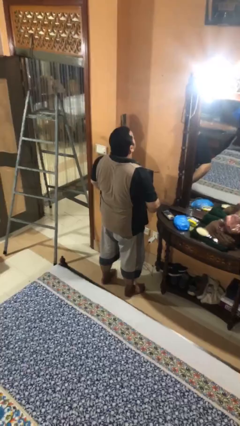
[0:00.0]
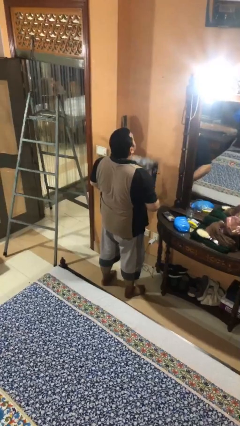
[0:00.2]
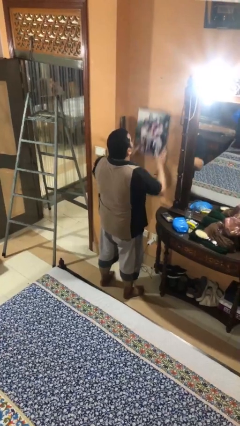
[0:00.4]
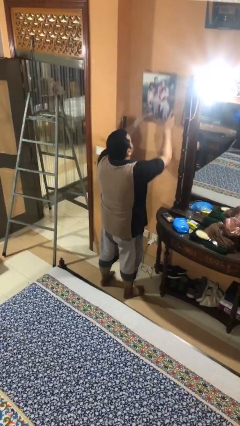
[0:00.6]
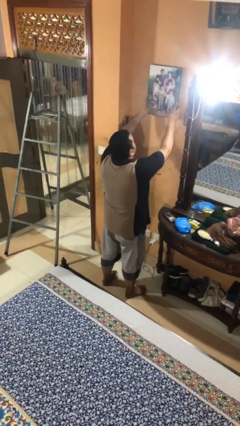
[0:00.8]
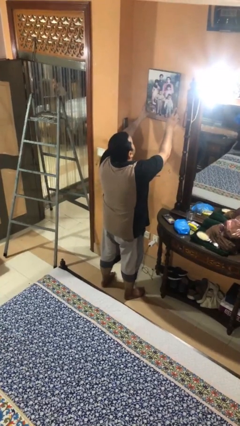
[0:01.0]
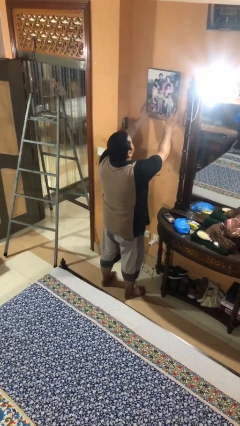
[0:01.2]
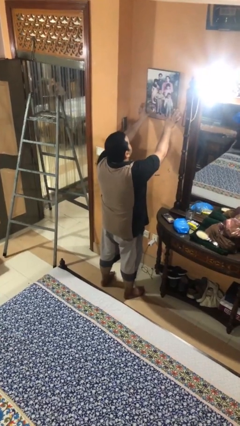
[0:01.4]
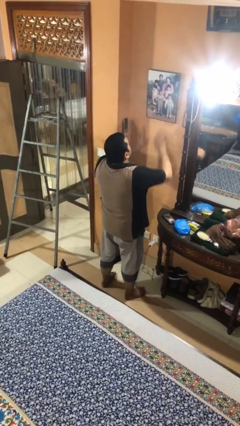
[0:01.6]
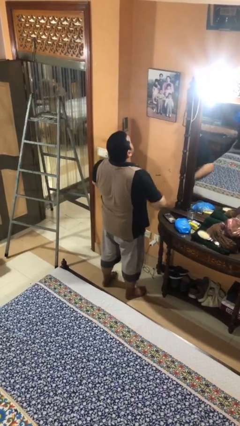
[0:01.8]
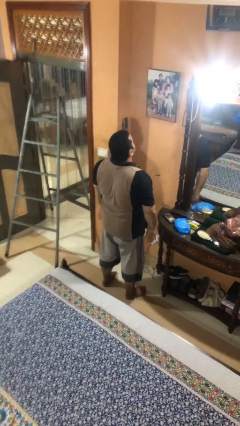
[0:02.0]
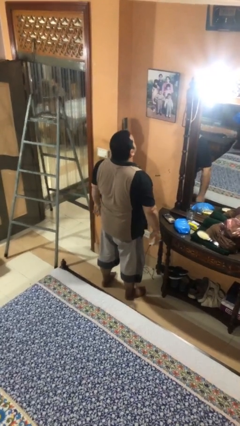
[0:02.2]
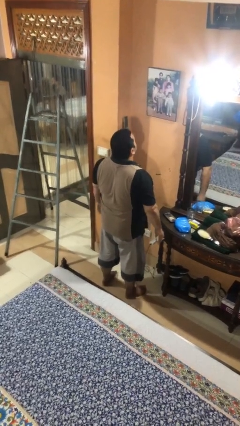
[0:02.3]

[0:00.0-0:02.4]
person puts up picture frame

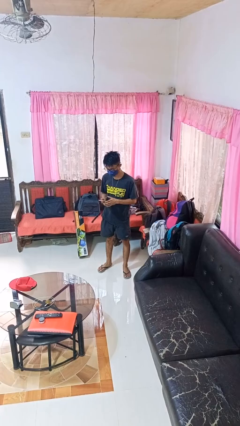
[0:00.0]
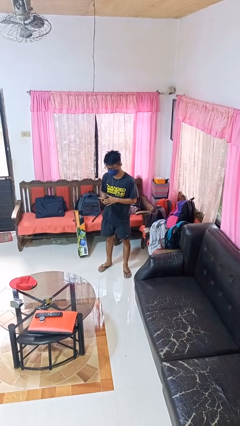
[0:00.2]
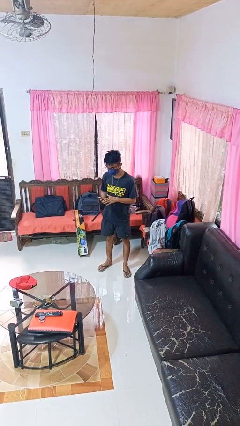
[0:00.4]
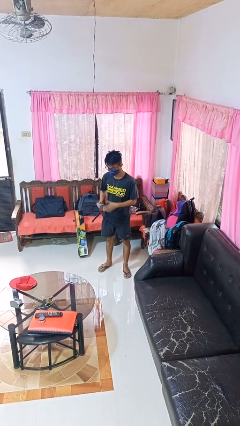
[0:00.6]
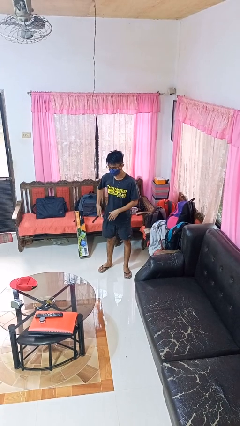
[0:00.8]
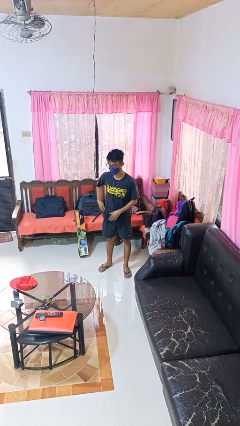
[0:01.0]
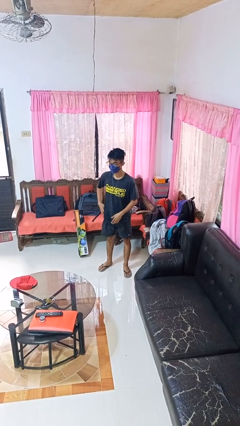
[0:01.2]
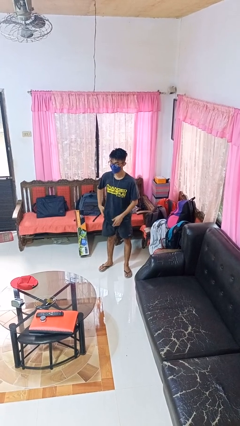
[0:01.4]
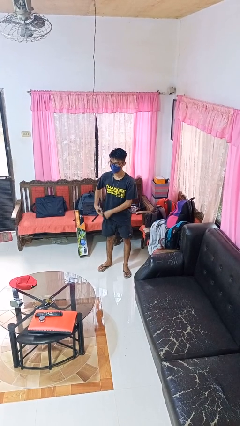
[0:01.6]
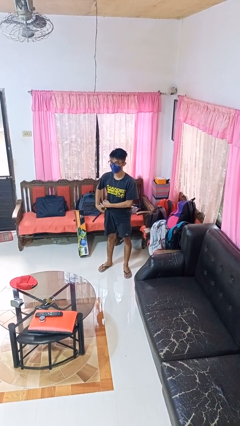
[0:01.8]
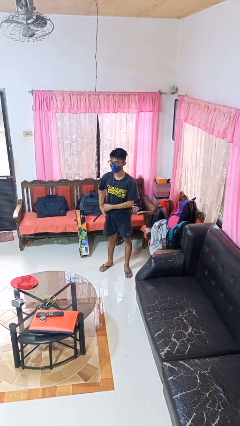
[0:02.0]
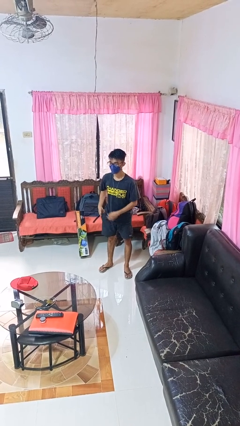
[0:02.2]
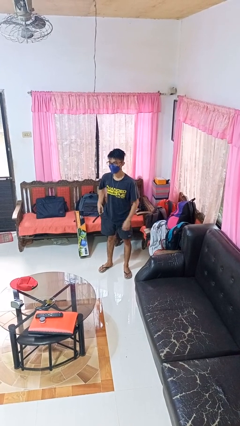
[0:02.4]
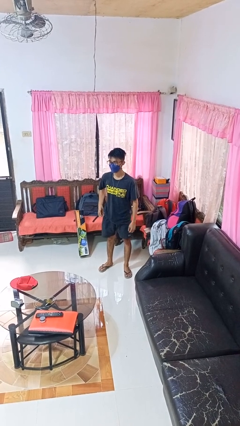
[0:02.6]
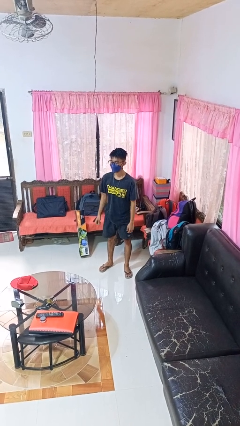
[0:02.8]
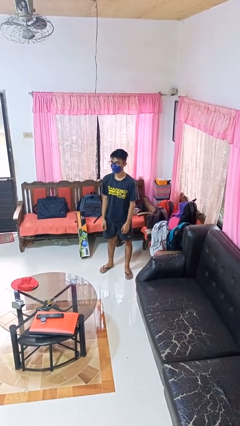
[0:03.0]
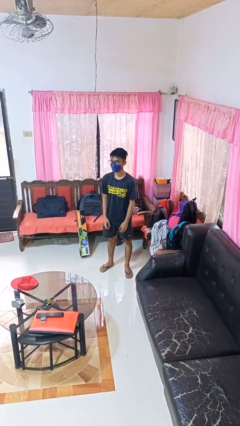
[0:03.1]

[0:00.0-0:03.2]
person puts phone into pocket

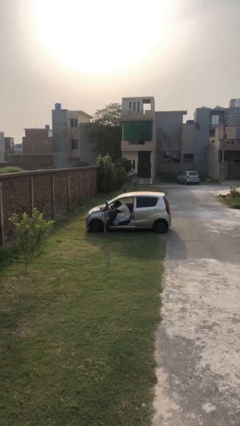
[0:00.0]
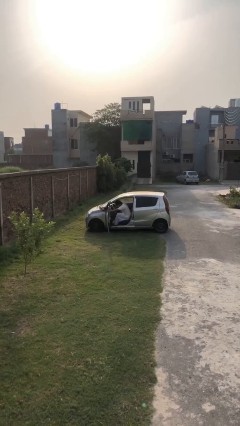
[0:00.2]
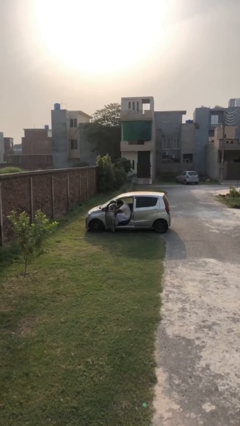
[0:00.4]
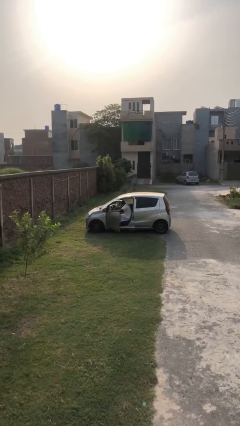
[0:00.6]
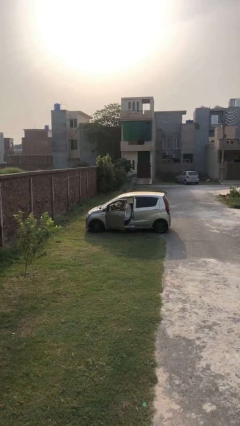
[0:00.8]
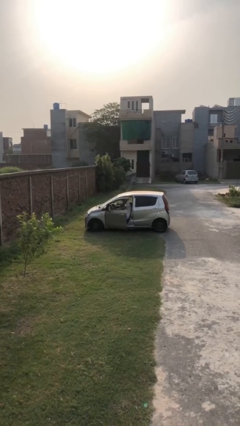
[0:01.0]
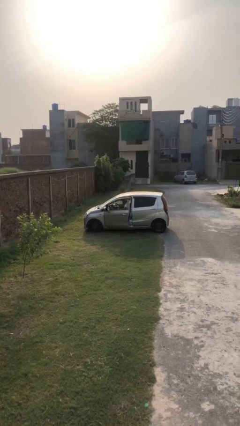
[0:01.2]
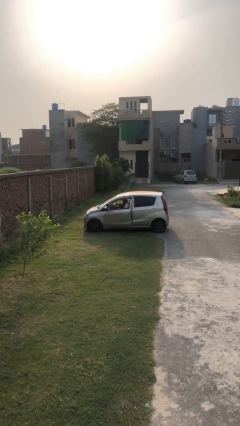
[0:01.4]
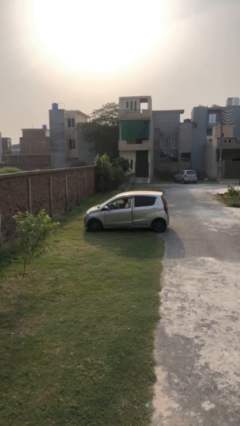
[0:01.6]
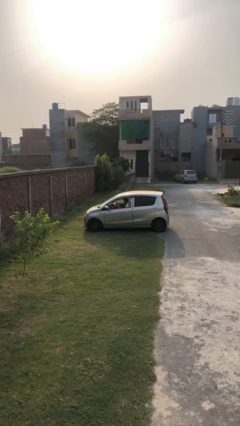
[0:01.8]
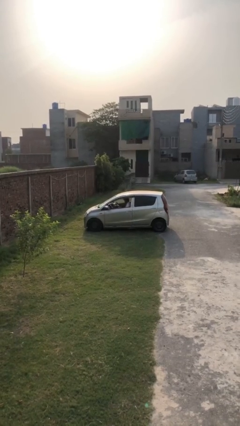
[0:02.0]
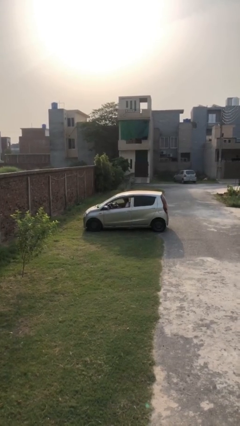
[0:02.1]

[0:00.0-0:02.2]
person closes car door

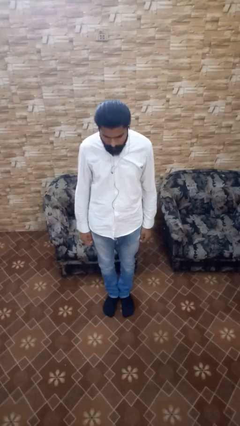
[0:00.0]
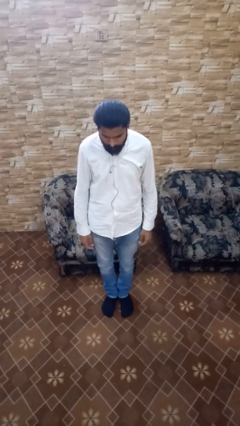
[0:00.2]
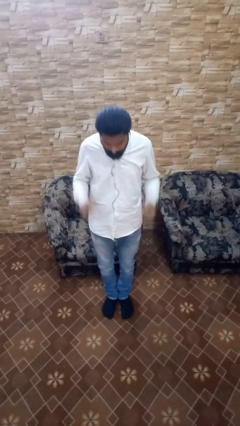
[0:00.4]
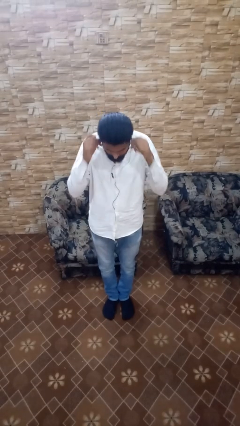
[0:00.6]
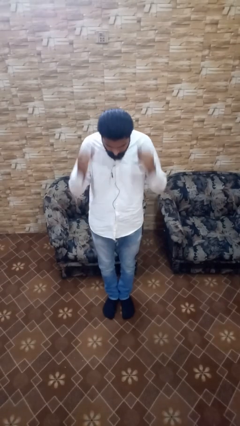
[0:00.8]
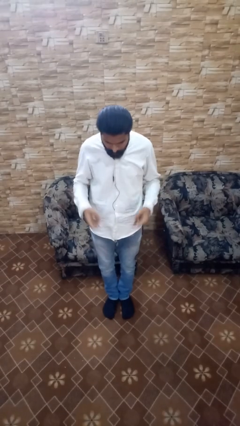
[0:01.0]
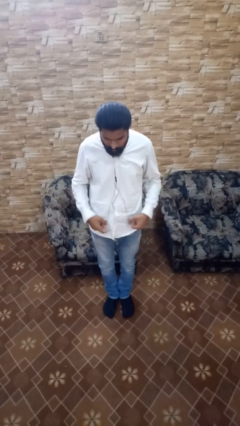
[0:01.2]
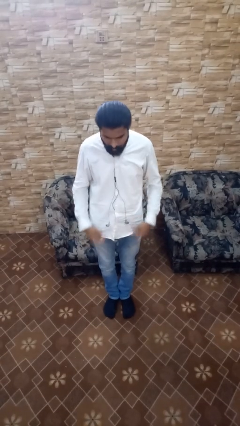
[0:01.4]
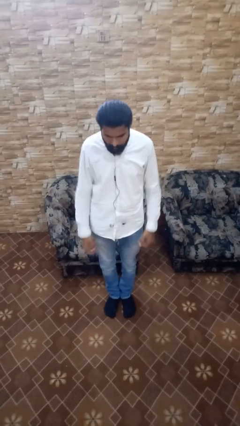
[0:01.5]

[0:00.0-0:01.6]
person takes off headphones

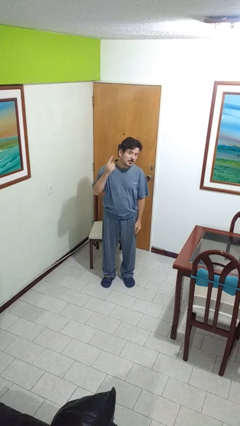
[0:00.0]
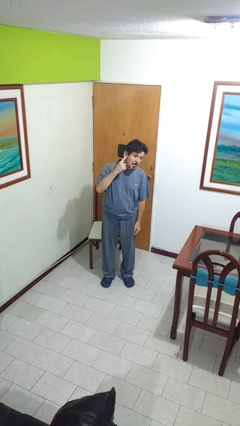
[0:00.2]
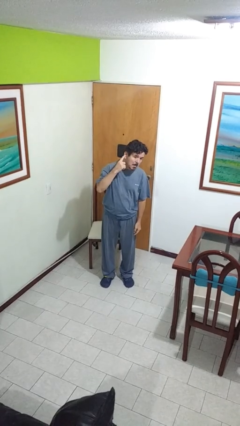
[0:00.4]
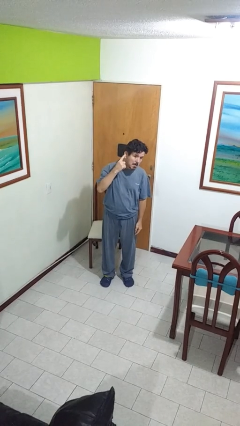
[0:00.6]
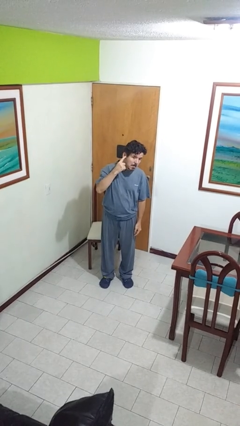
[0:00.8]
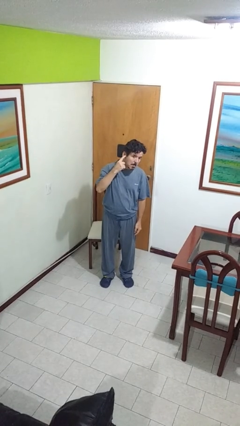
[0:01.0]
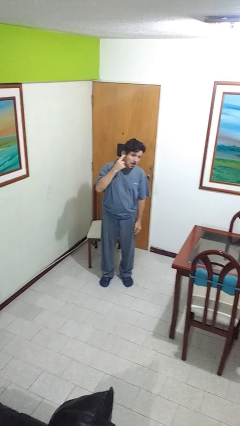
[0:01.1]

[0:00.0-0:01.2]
person gestures listen closely

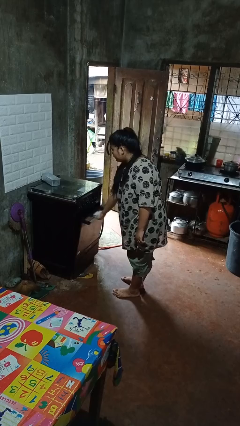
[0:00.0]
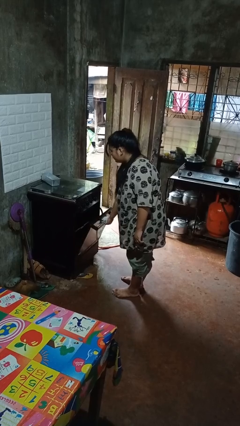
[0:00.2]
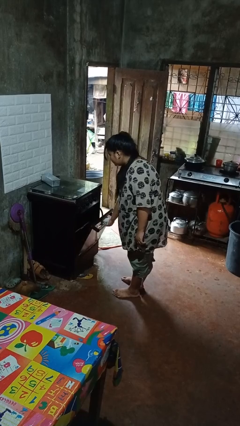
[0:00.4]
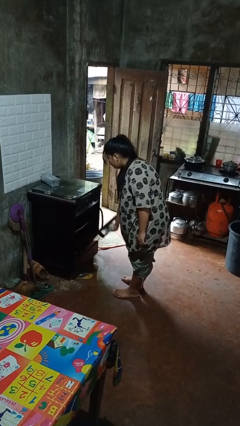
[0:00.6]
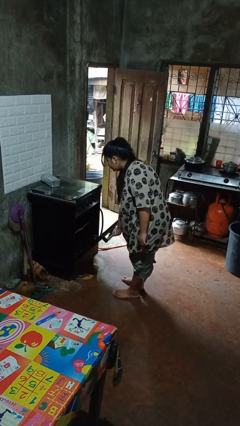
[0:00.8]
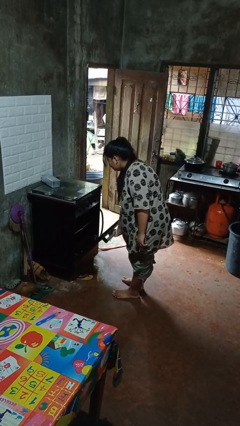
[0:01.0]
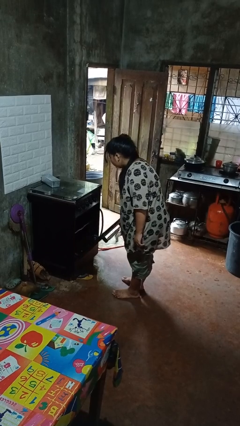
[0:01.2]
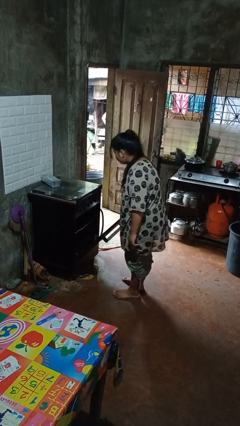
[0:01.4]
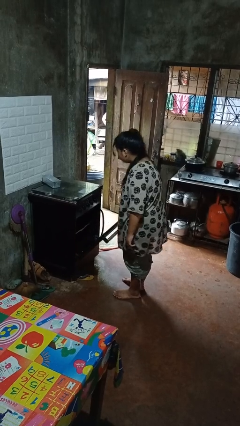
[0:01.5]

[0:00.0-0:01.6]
person opens oven door

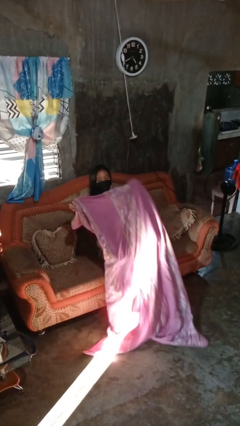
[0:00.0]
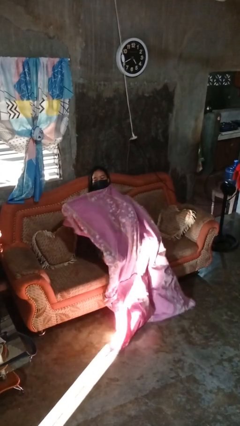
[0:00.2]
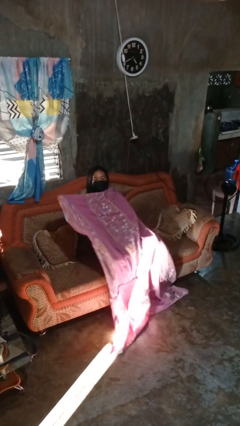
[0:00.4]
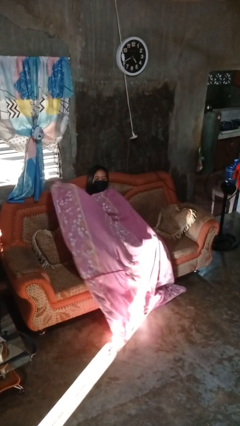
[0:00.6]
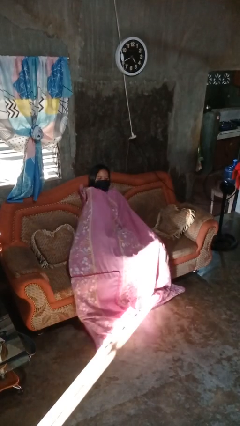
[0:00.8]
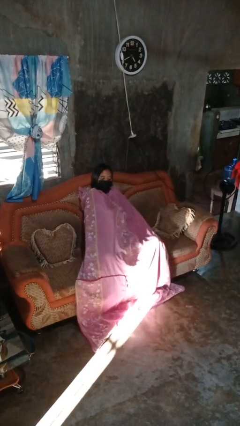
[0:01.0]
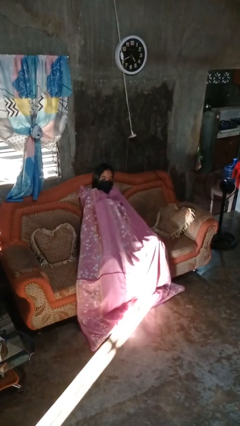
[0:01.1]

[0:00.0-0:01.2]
person covers with blanket

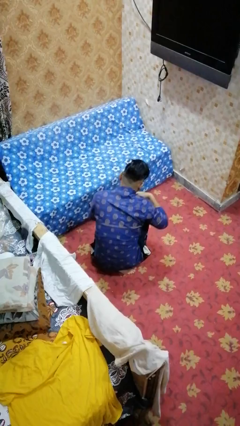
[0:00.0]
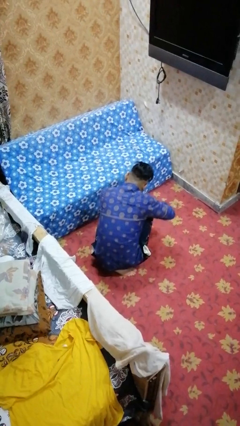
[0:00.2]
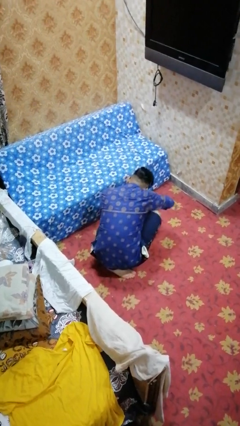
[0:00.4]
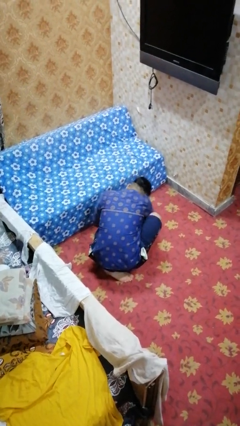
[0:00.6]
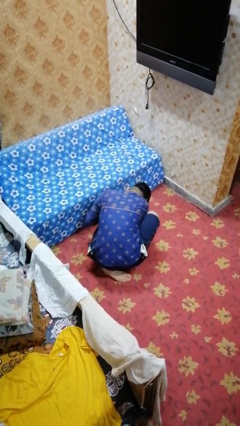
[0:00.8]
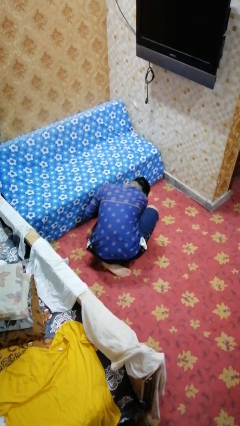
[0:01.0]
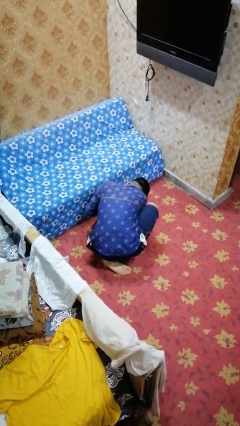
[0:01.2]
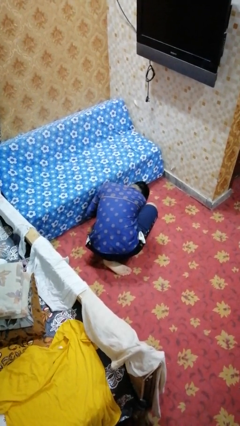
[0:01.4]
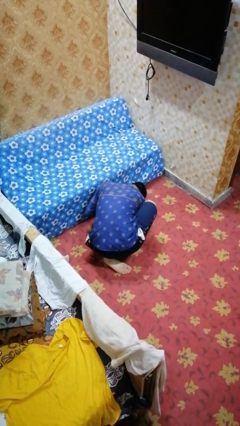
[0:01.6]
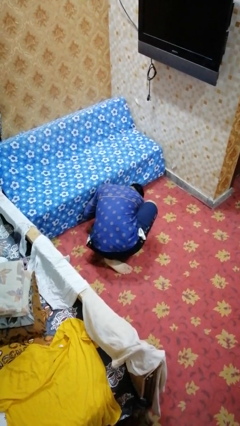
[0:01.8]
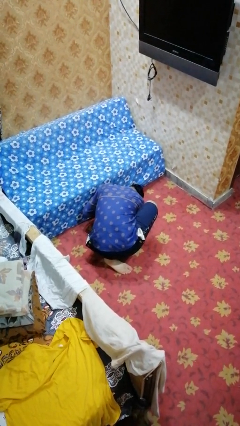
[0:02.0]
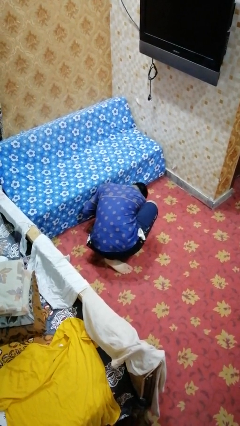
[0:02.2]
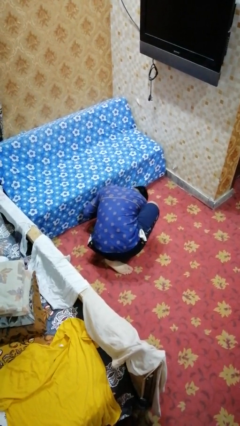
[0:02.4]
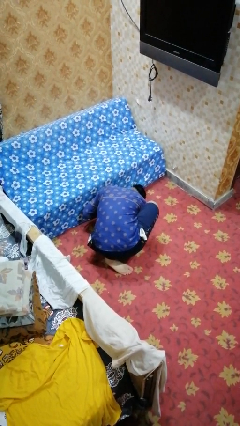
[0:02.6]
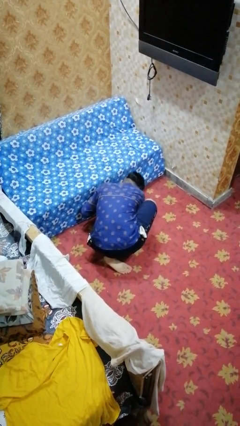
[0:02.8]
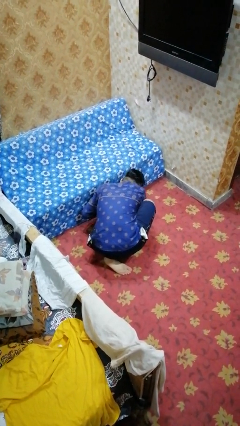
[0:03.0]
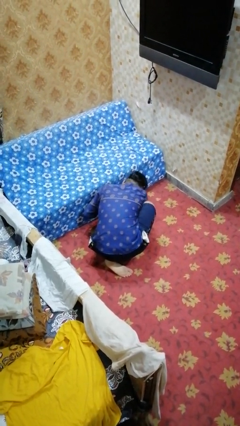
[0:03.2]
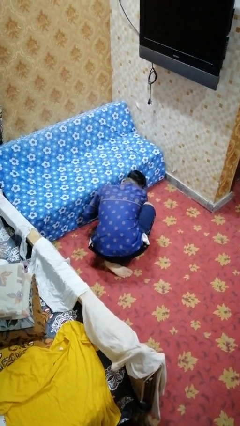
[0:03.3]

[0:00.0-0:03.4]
person searches under couch

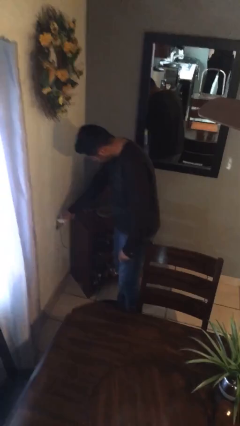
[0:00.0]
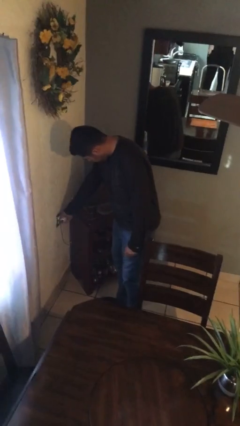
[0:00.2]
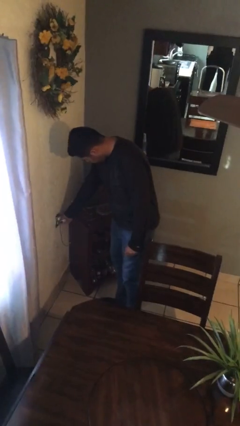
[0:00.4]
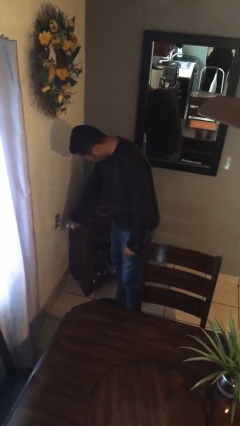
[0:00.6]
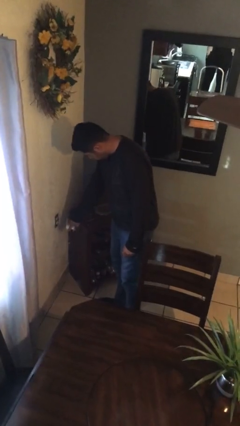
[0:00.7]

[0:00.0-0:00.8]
person pulls wheeled trashcan
